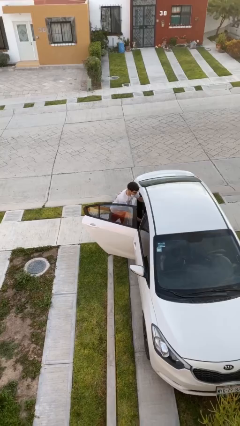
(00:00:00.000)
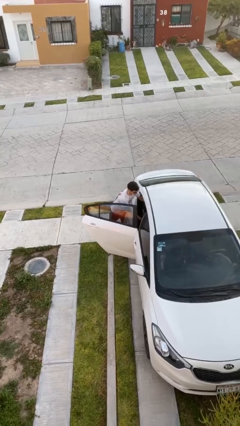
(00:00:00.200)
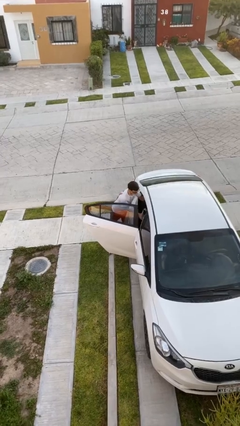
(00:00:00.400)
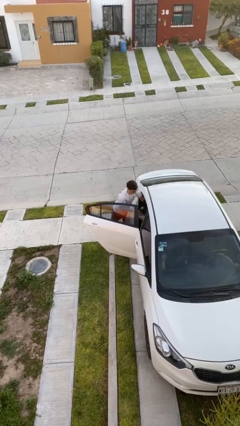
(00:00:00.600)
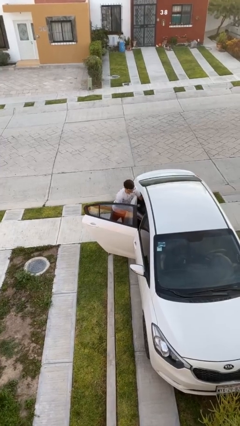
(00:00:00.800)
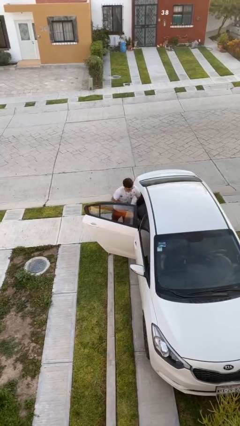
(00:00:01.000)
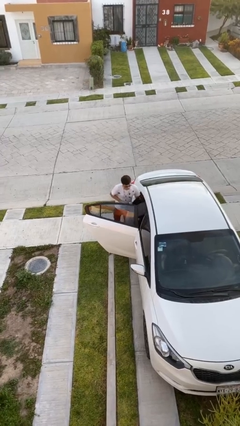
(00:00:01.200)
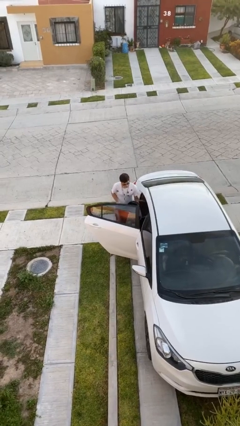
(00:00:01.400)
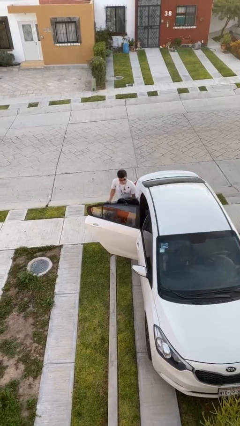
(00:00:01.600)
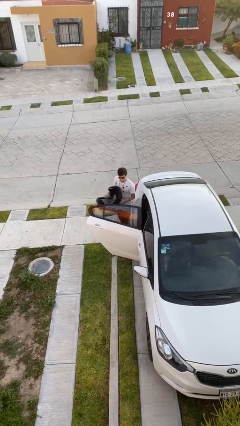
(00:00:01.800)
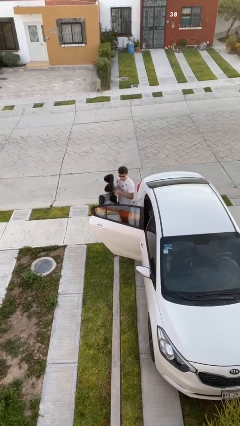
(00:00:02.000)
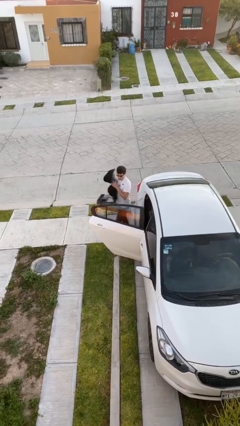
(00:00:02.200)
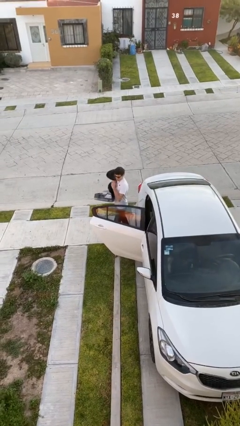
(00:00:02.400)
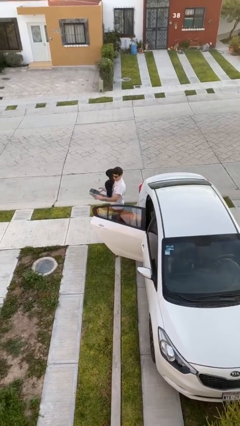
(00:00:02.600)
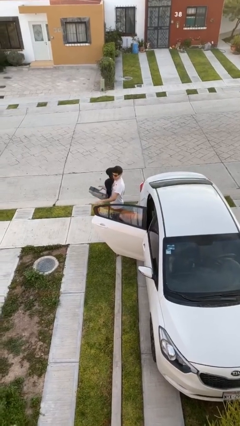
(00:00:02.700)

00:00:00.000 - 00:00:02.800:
person unloads car

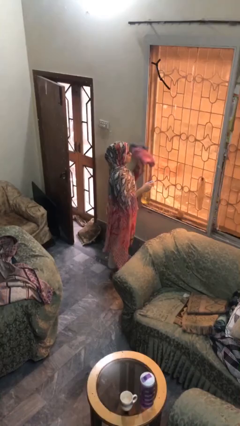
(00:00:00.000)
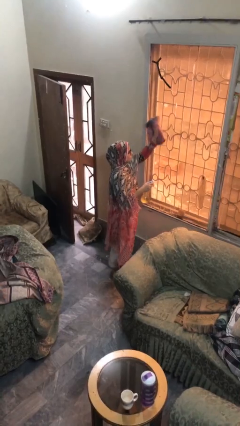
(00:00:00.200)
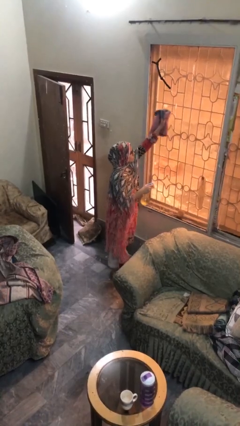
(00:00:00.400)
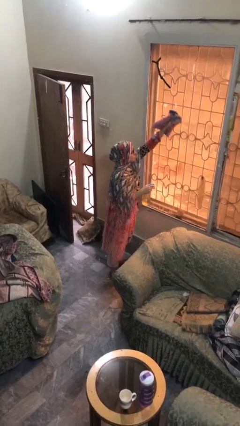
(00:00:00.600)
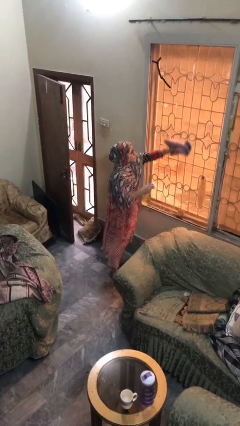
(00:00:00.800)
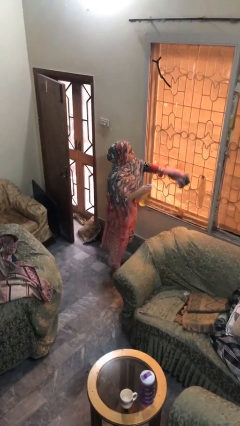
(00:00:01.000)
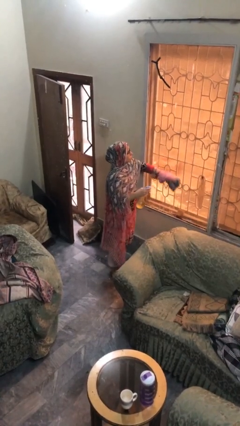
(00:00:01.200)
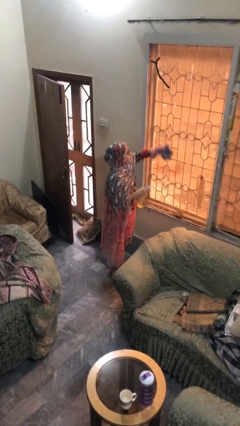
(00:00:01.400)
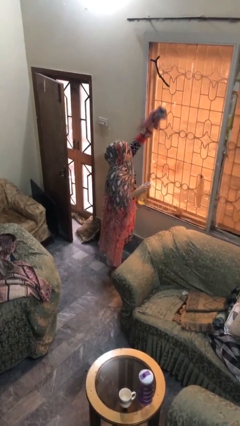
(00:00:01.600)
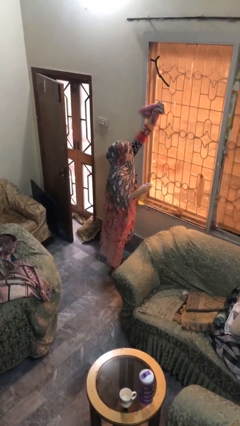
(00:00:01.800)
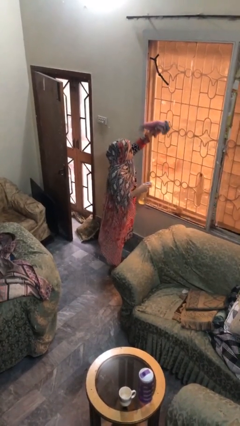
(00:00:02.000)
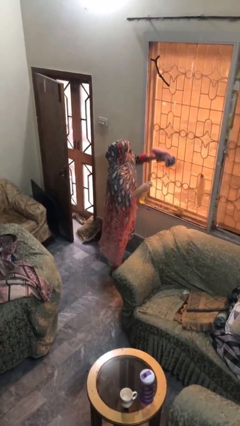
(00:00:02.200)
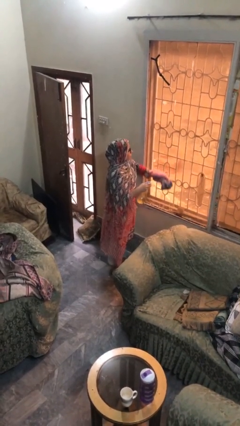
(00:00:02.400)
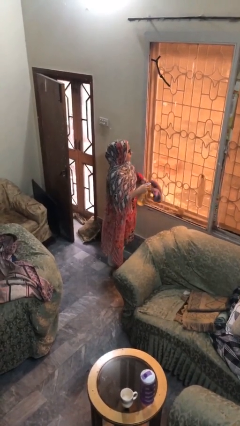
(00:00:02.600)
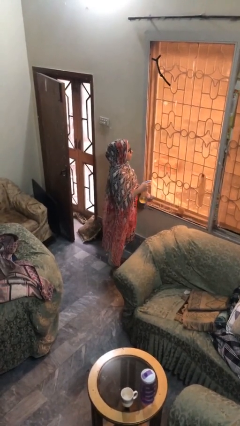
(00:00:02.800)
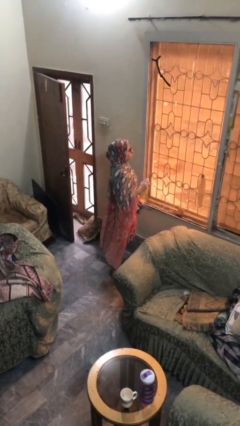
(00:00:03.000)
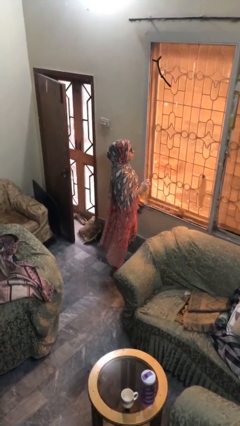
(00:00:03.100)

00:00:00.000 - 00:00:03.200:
person washes window

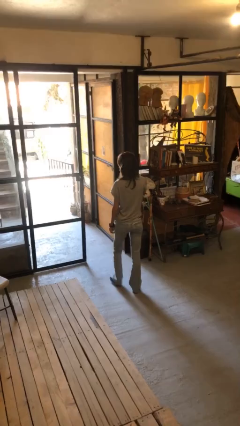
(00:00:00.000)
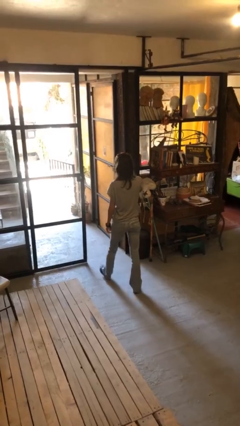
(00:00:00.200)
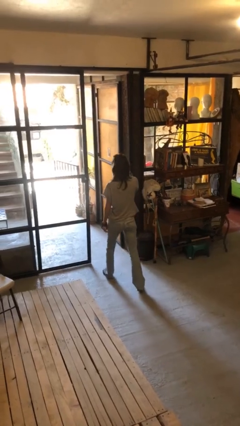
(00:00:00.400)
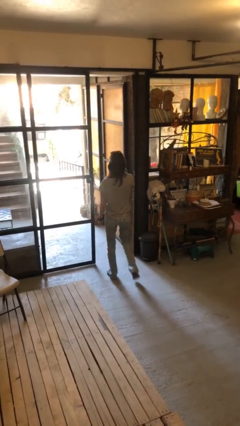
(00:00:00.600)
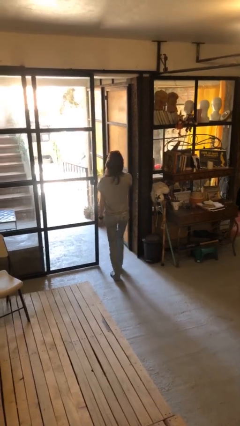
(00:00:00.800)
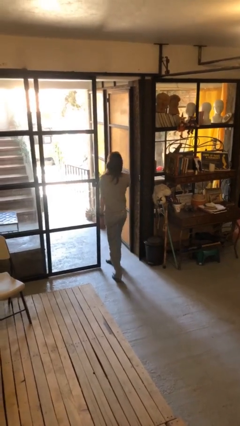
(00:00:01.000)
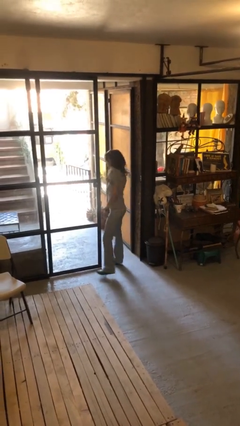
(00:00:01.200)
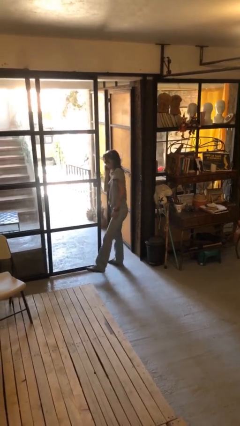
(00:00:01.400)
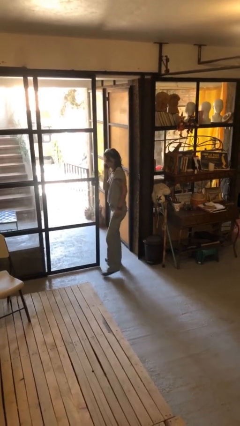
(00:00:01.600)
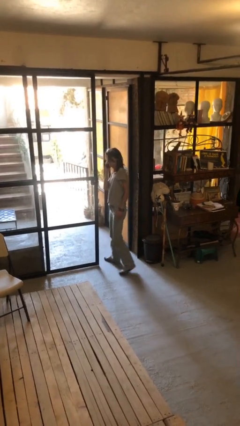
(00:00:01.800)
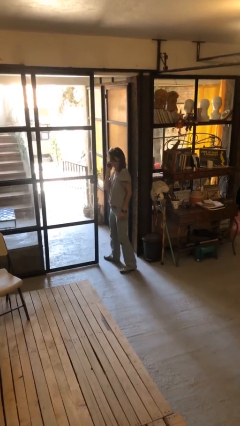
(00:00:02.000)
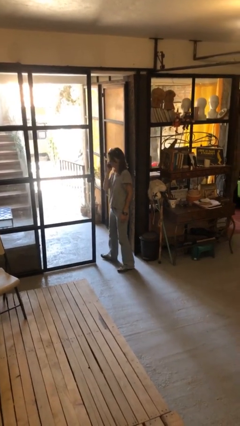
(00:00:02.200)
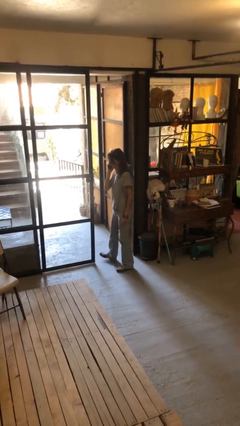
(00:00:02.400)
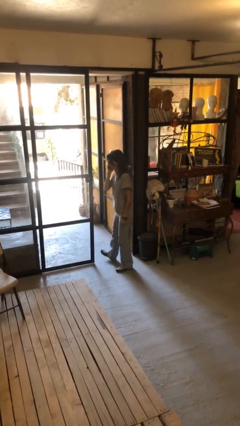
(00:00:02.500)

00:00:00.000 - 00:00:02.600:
person bumps into wall

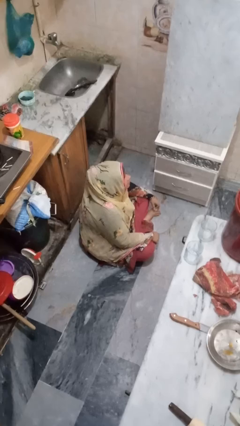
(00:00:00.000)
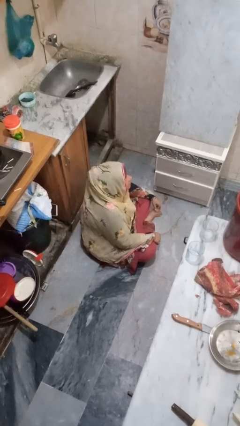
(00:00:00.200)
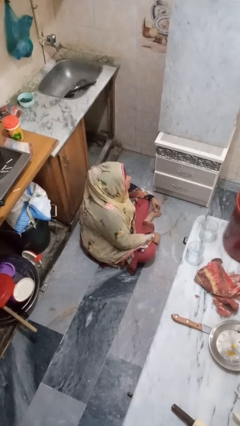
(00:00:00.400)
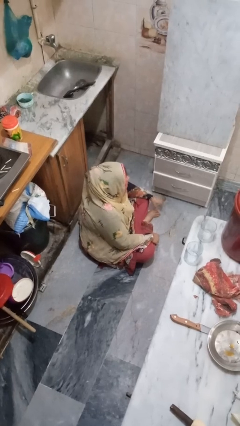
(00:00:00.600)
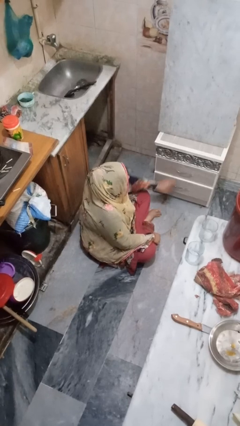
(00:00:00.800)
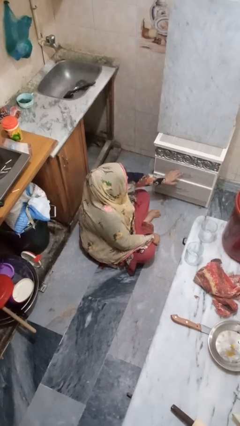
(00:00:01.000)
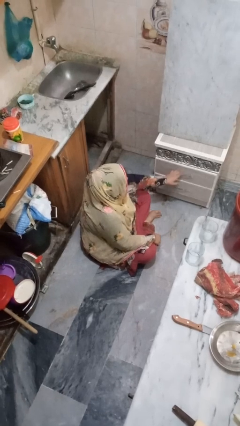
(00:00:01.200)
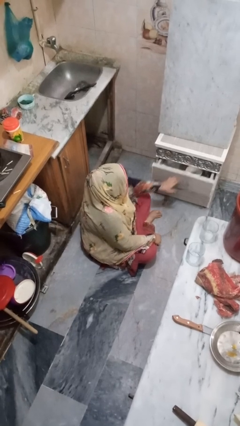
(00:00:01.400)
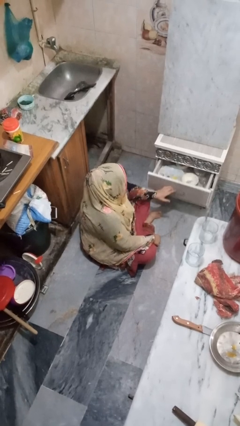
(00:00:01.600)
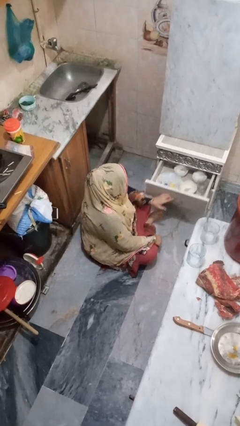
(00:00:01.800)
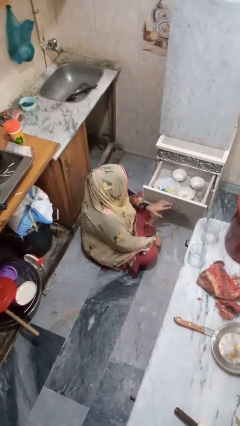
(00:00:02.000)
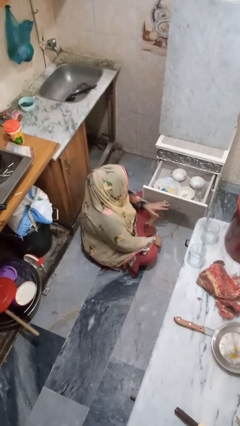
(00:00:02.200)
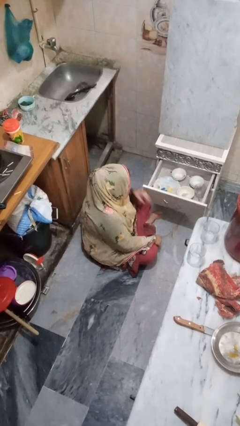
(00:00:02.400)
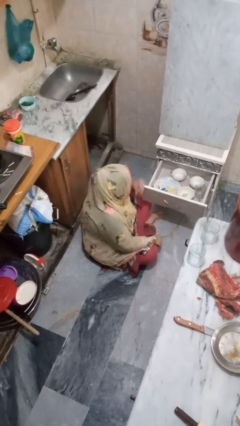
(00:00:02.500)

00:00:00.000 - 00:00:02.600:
person takes object from kitchen drawer

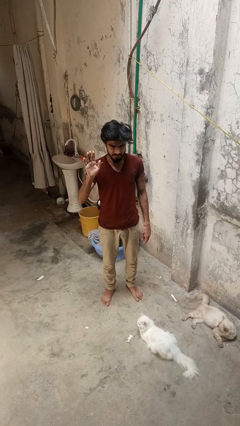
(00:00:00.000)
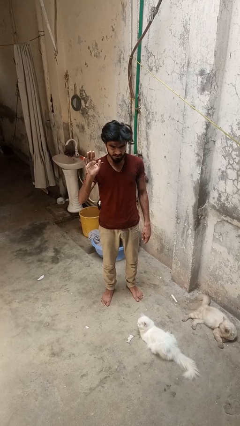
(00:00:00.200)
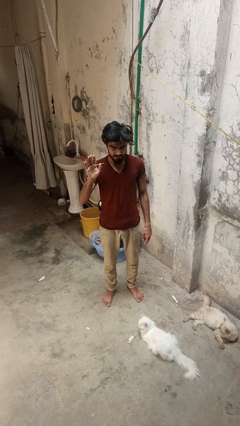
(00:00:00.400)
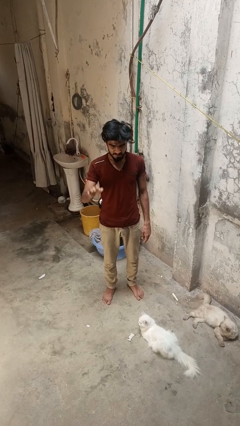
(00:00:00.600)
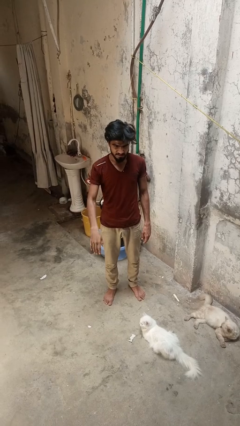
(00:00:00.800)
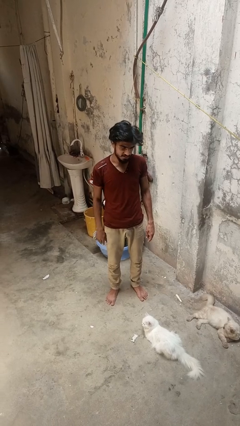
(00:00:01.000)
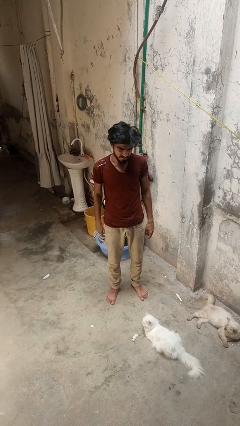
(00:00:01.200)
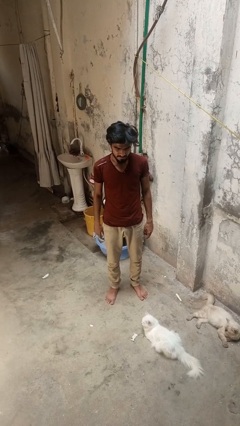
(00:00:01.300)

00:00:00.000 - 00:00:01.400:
person gestures lower hand

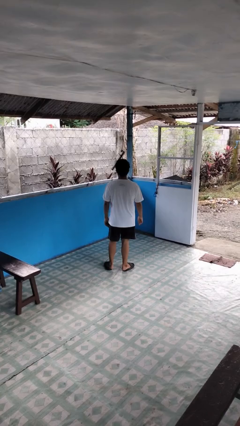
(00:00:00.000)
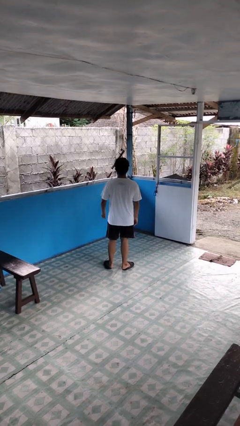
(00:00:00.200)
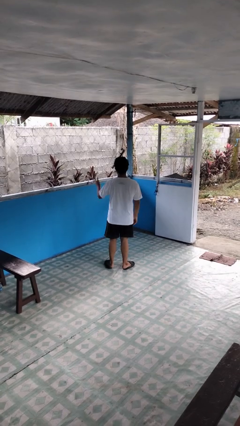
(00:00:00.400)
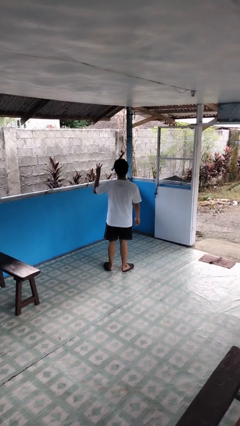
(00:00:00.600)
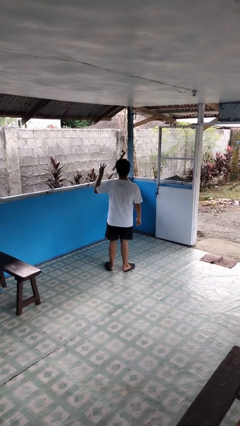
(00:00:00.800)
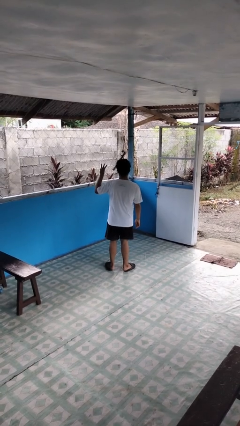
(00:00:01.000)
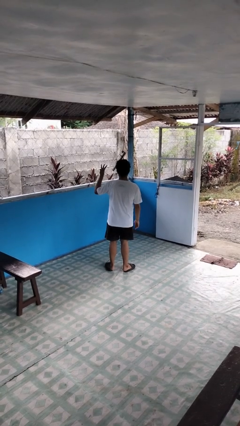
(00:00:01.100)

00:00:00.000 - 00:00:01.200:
person gestures number three

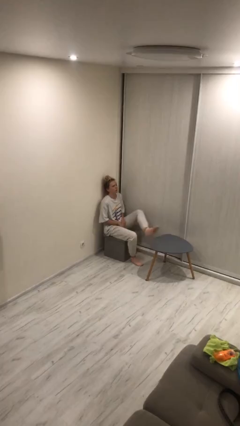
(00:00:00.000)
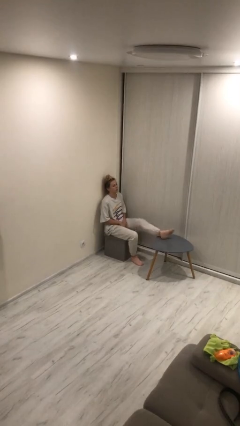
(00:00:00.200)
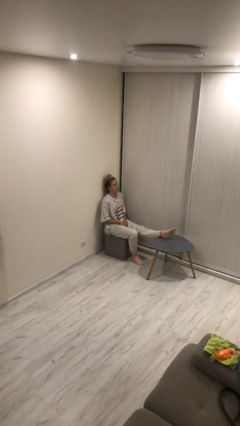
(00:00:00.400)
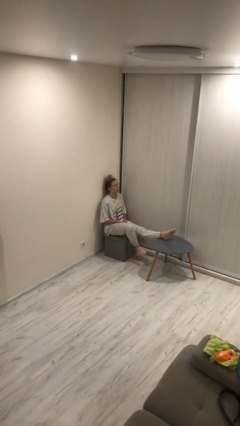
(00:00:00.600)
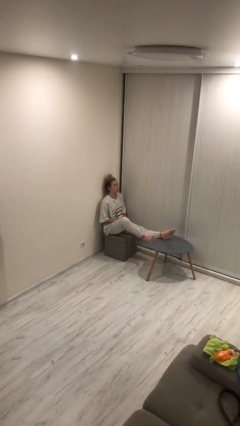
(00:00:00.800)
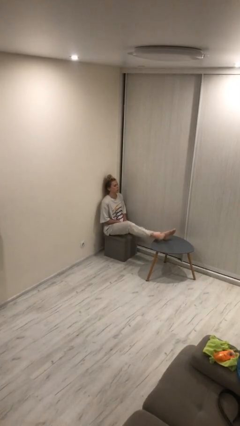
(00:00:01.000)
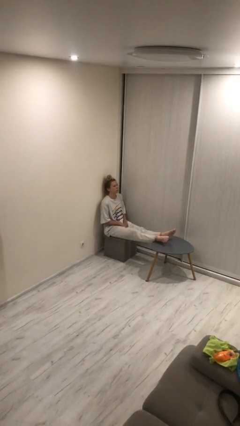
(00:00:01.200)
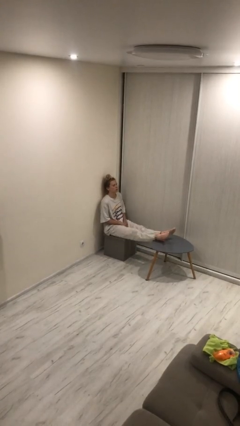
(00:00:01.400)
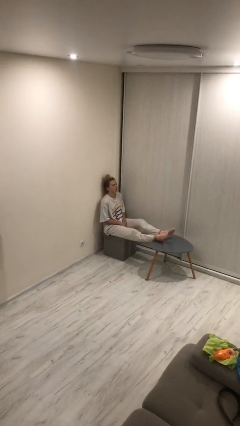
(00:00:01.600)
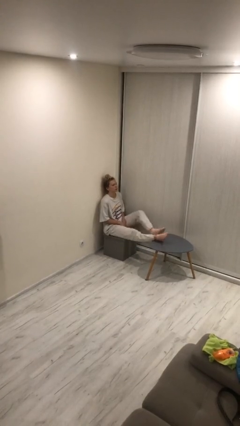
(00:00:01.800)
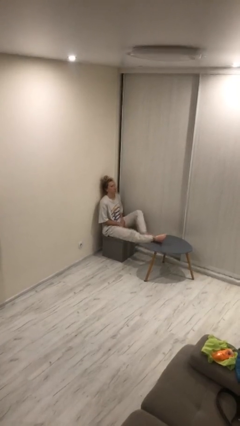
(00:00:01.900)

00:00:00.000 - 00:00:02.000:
person puts feet up

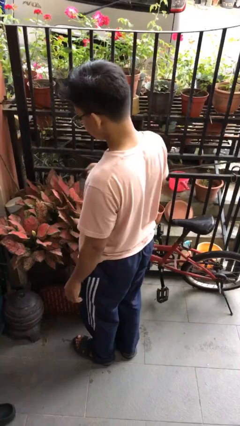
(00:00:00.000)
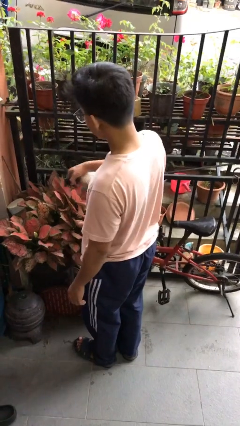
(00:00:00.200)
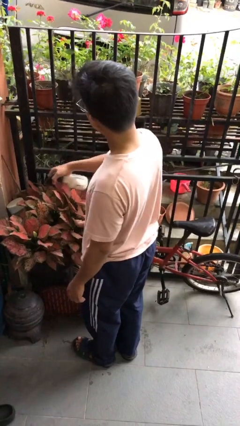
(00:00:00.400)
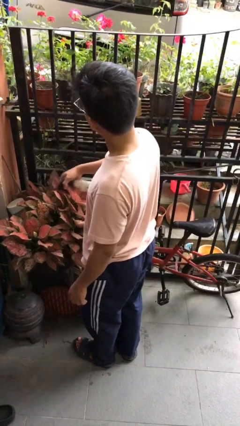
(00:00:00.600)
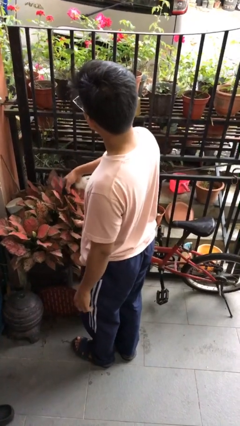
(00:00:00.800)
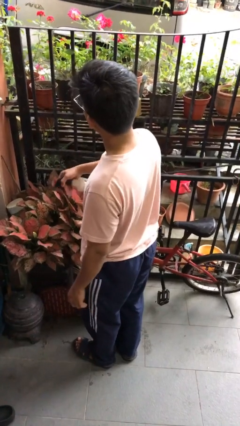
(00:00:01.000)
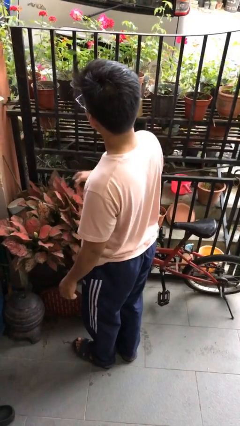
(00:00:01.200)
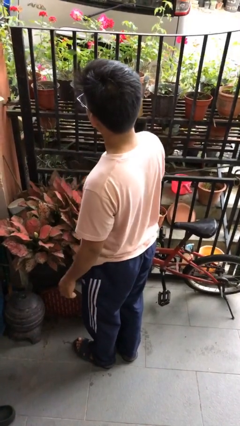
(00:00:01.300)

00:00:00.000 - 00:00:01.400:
person waters houseplant
